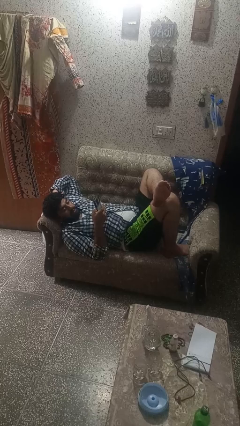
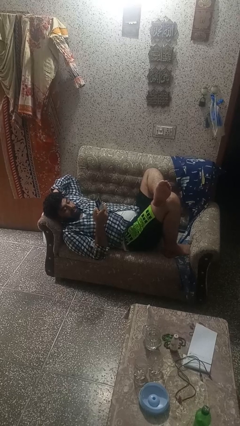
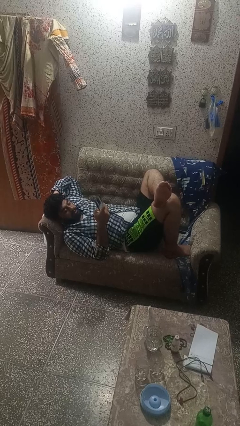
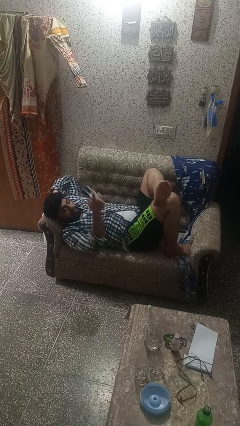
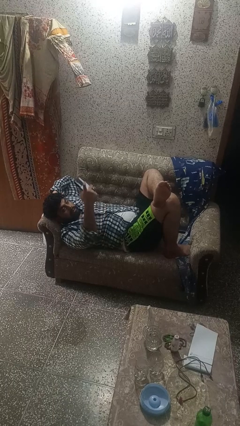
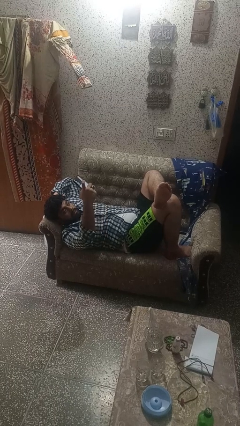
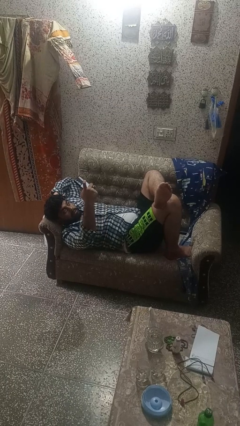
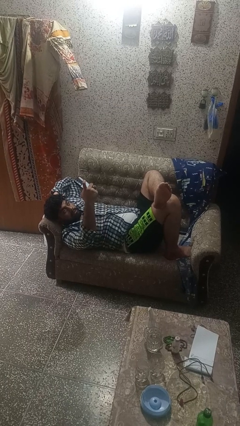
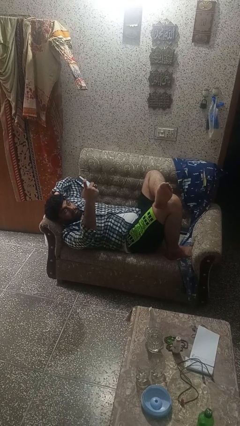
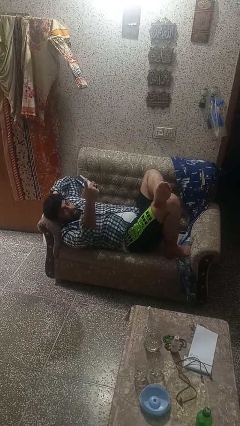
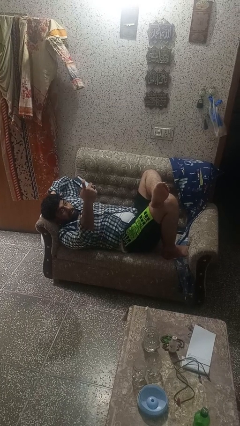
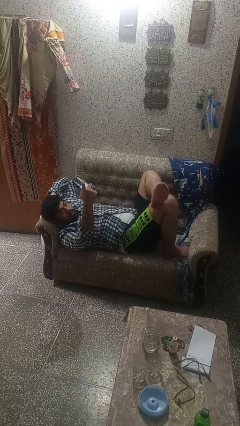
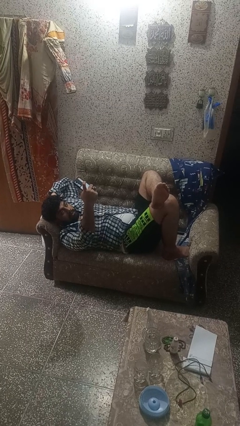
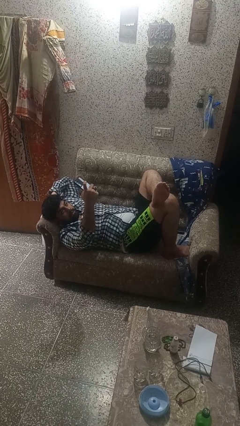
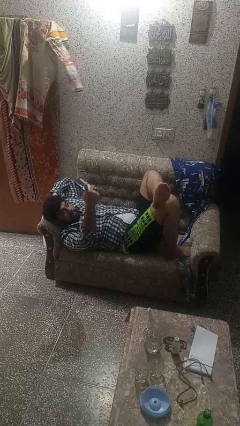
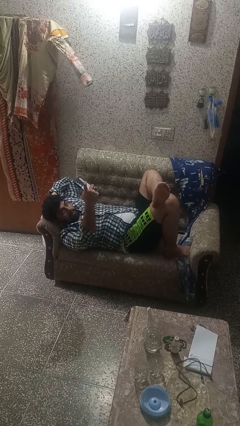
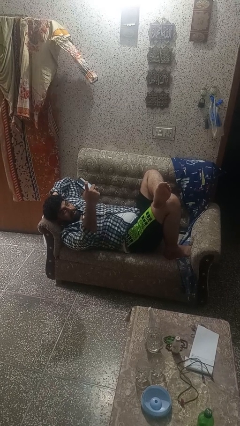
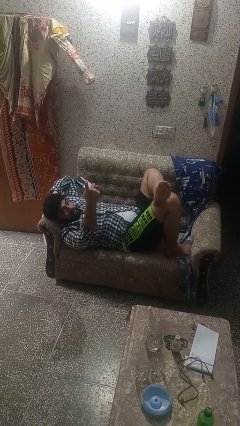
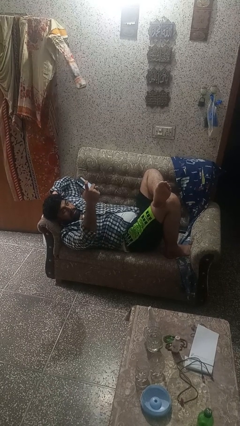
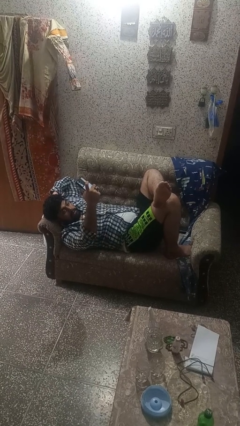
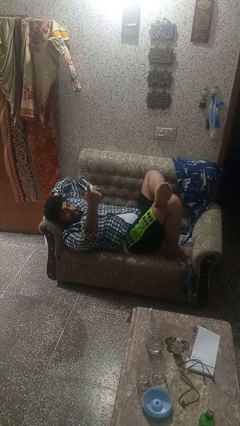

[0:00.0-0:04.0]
person takes selfie

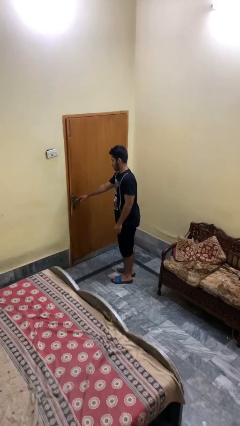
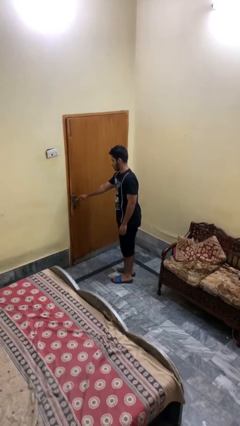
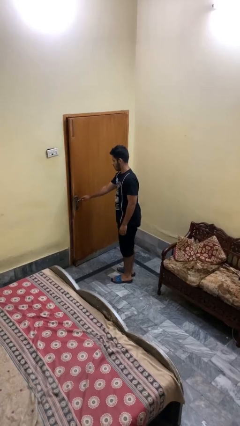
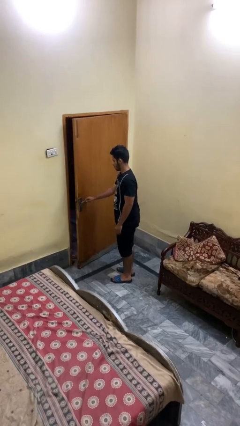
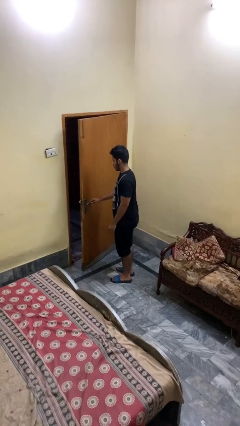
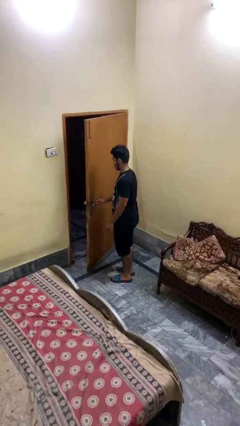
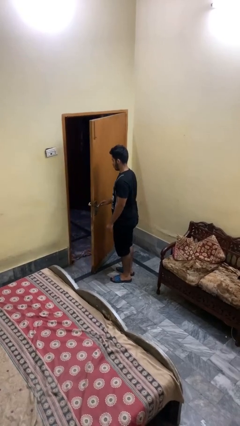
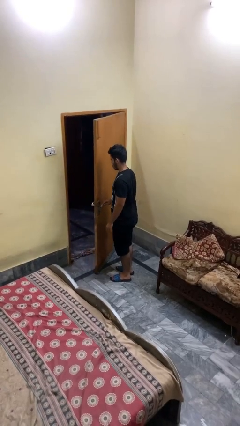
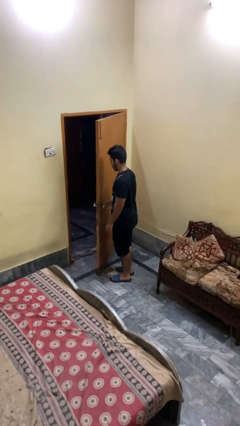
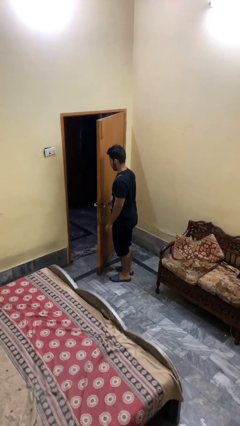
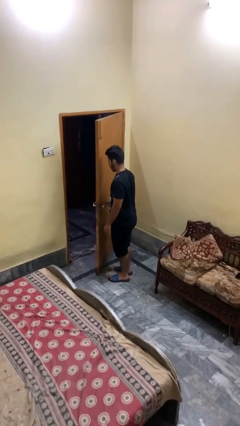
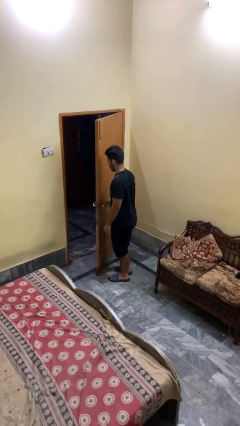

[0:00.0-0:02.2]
person opens facility door

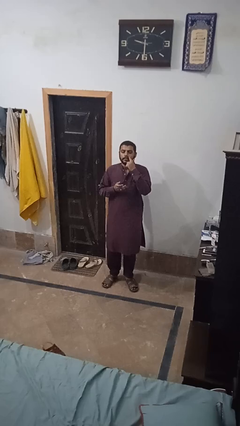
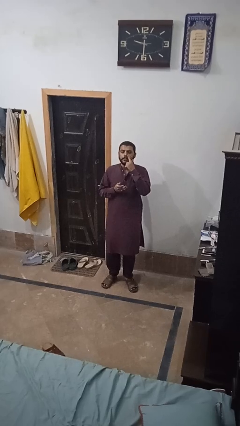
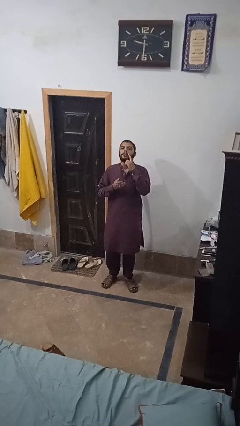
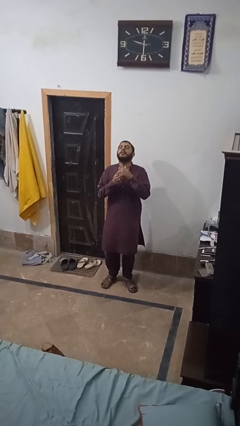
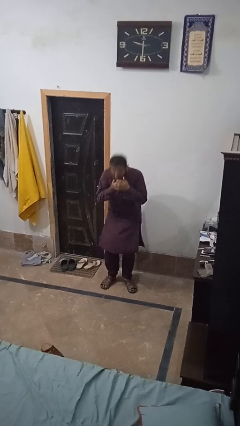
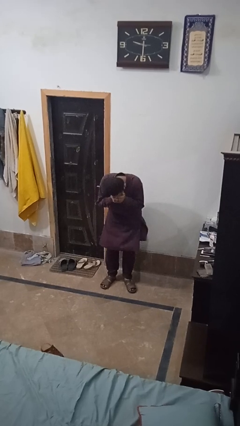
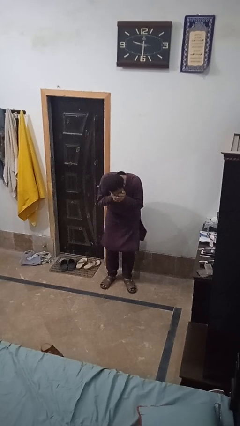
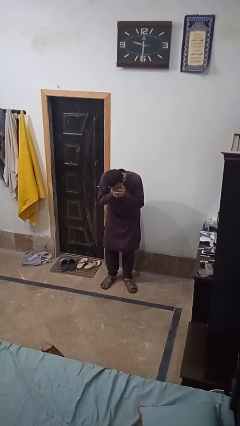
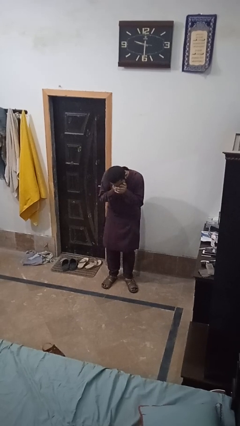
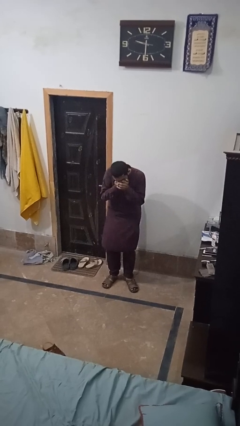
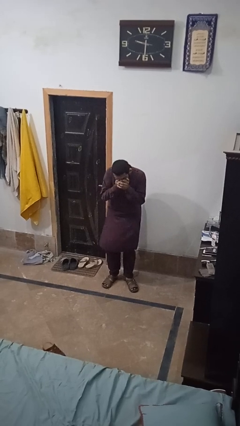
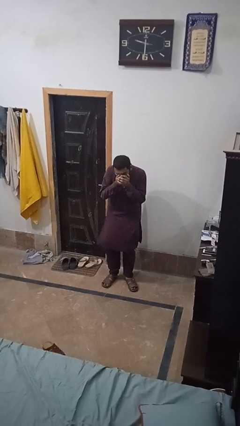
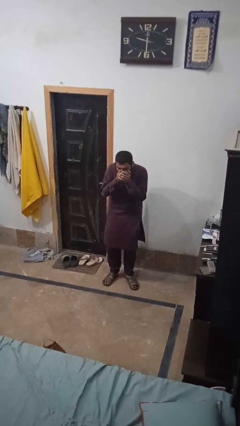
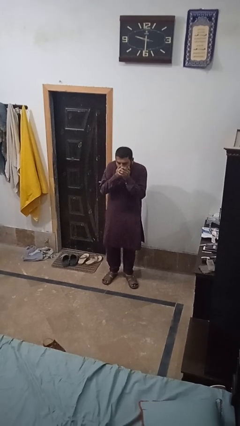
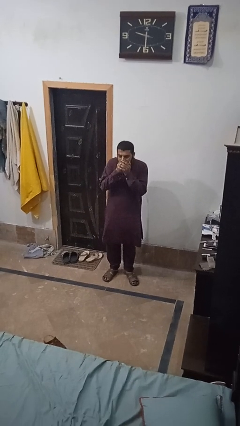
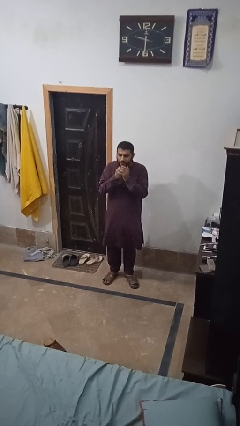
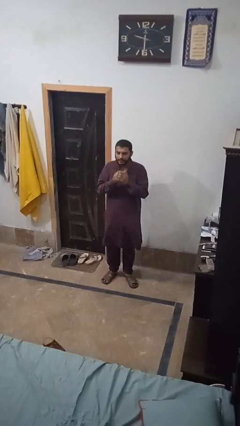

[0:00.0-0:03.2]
person sneezes into hand

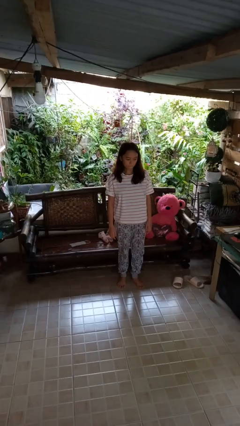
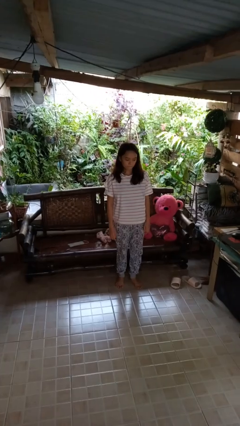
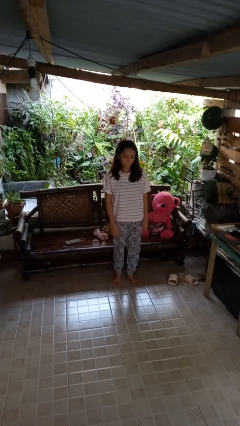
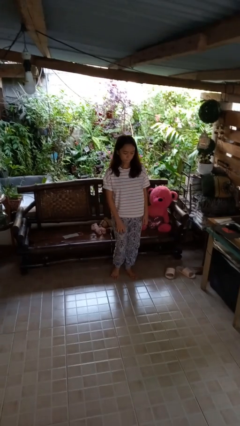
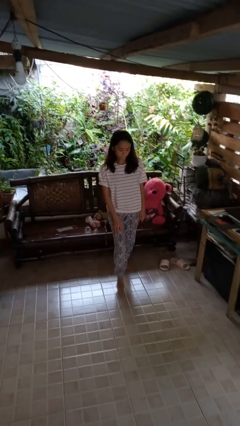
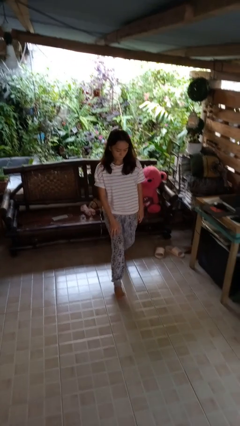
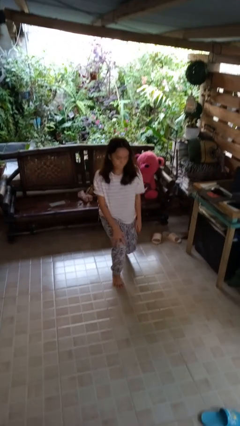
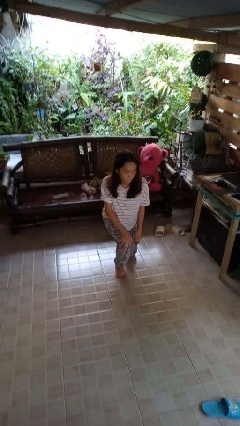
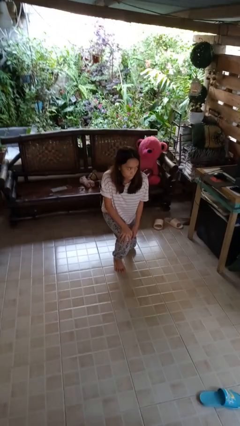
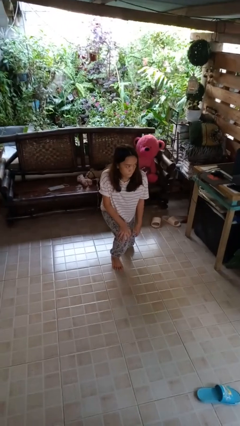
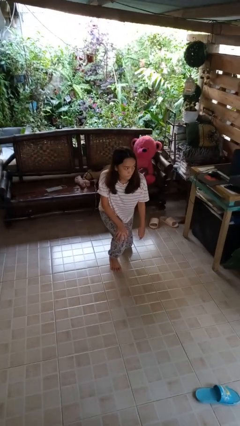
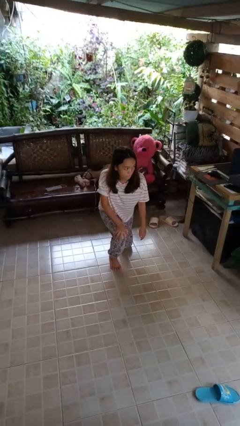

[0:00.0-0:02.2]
person kneels

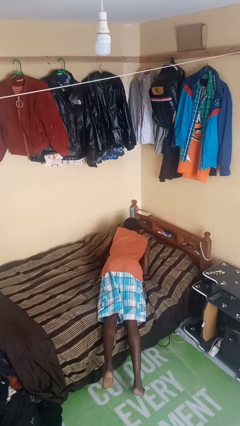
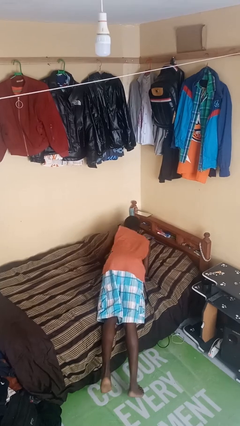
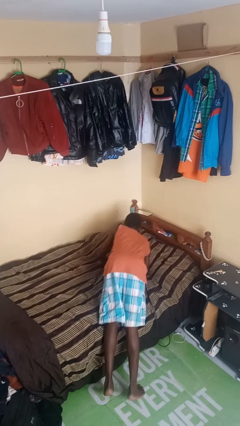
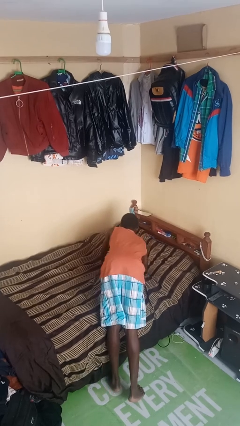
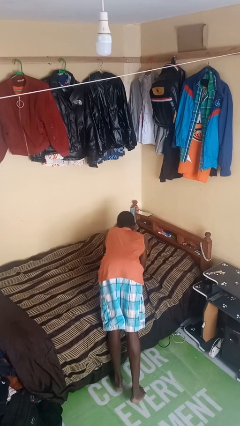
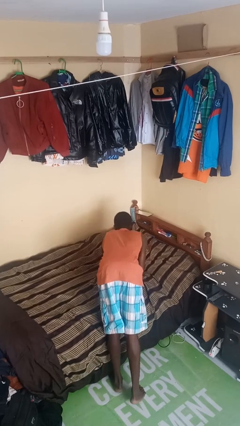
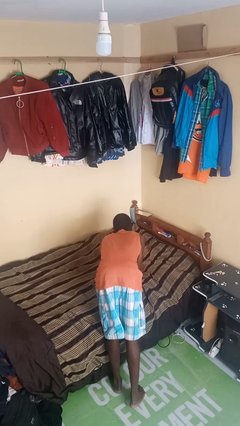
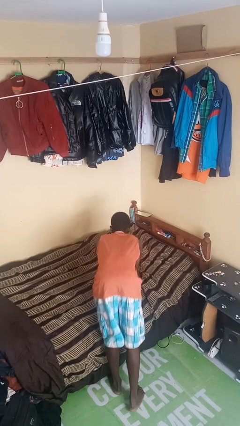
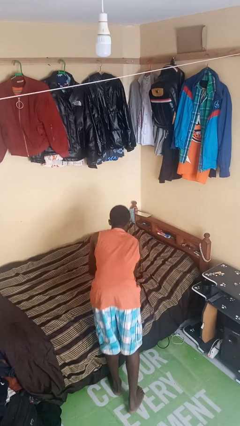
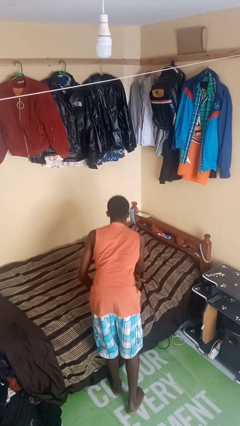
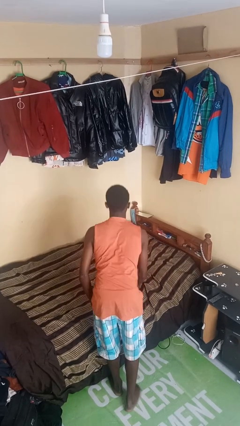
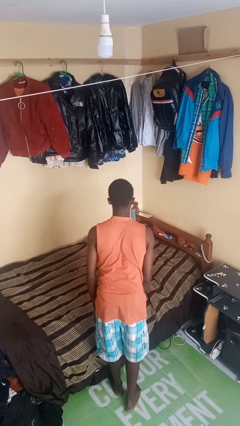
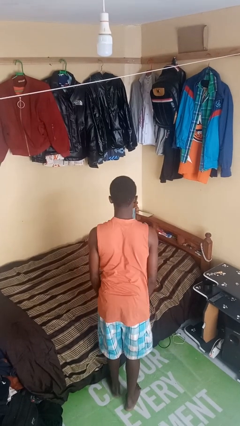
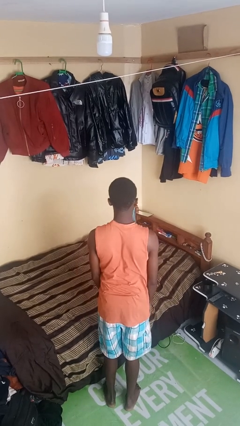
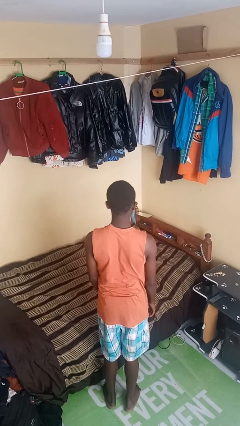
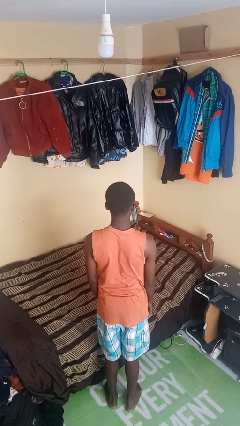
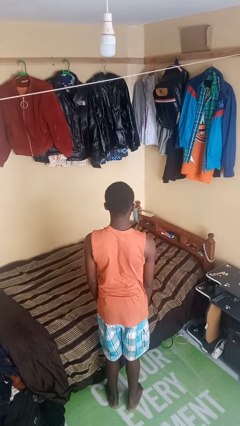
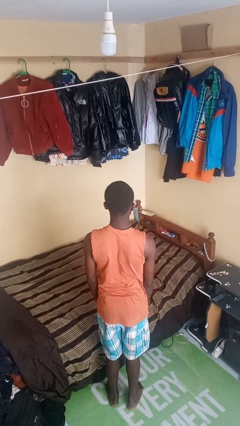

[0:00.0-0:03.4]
person stands up

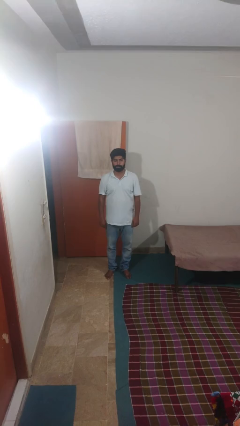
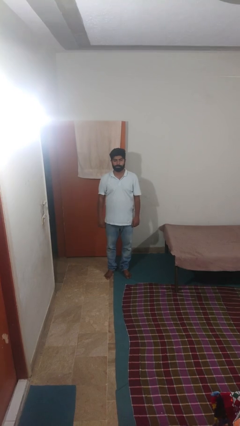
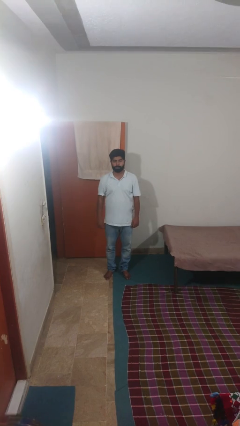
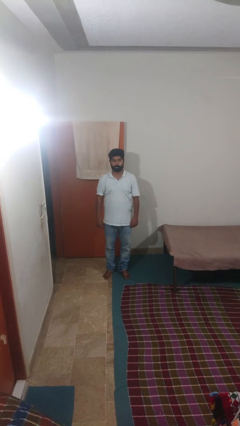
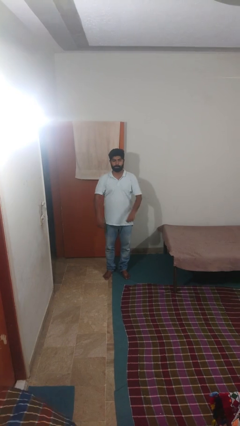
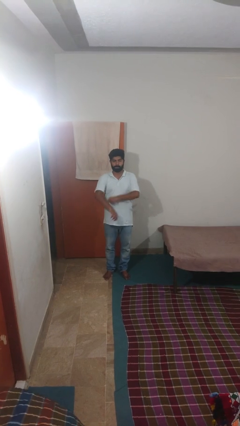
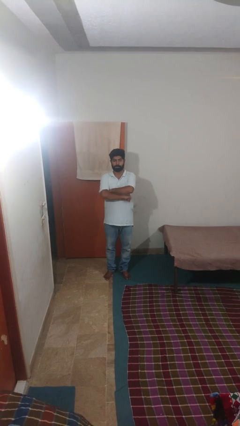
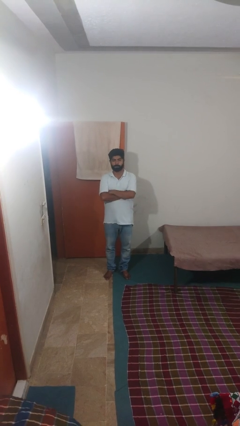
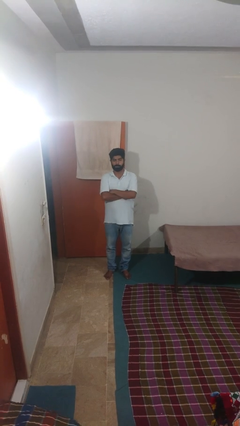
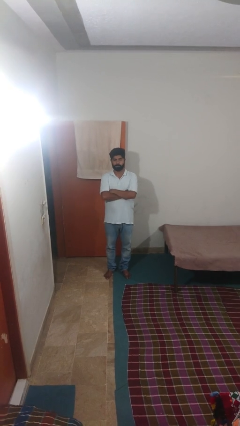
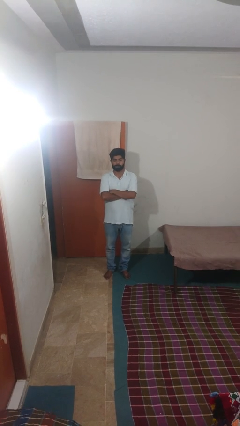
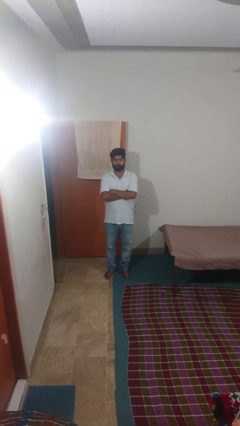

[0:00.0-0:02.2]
person crosses arms
